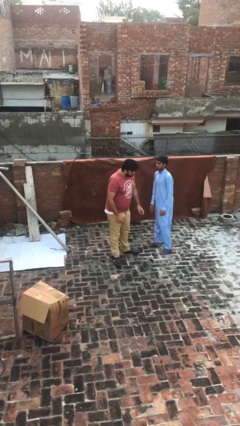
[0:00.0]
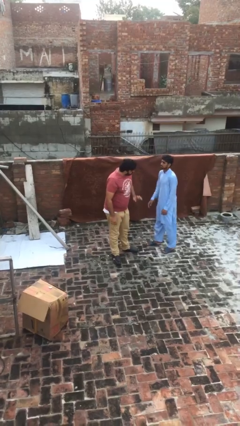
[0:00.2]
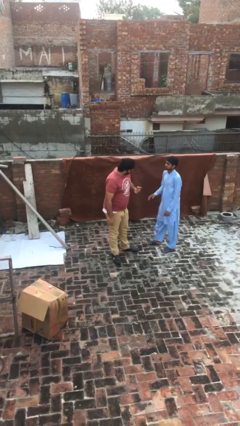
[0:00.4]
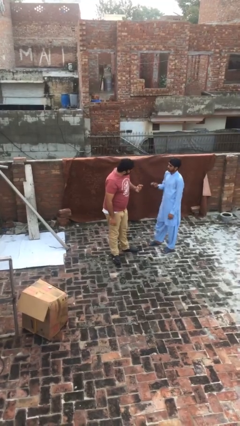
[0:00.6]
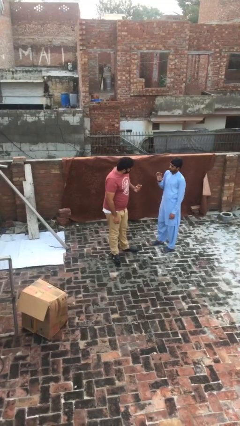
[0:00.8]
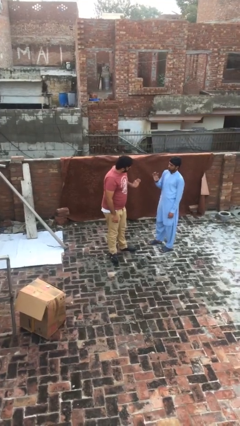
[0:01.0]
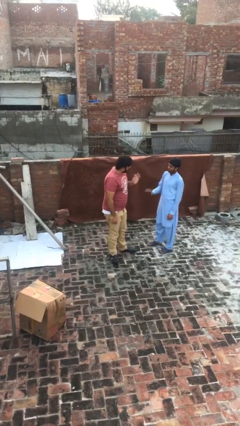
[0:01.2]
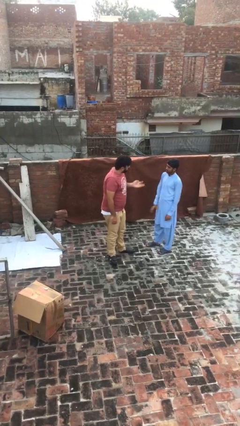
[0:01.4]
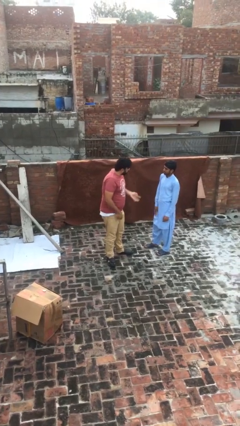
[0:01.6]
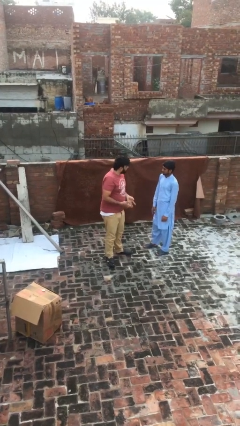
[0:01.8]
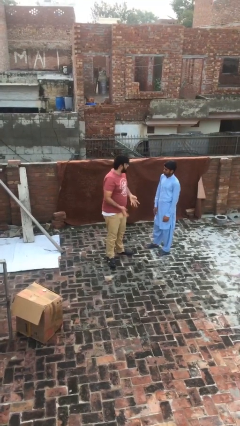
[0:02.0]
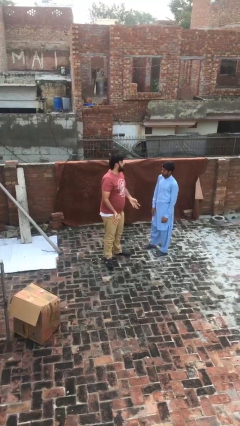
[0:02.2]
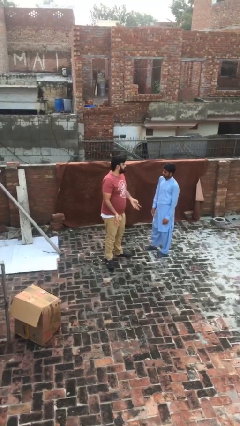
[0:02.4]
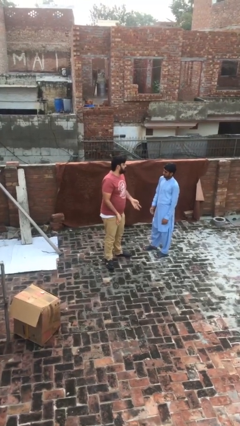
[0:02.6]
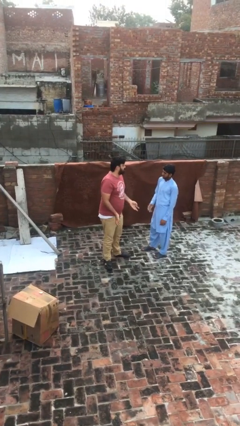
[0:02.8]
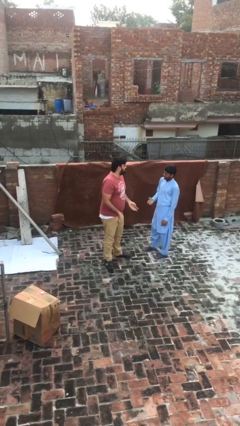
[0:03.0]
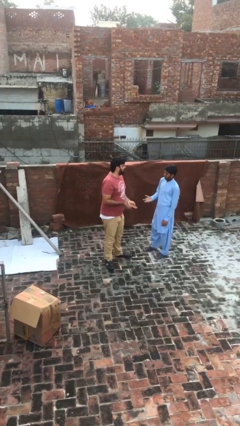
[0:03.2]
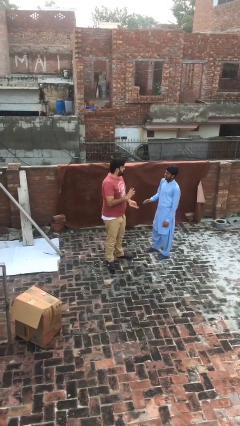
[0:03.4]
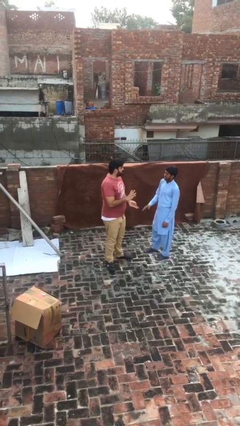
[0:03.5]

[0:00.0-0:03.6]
person talks to person

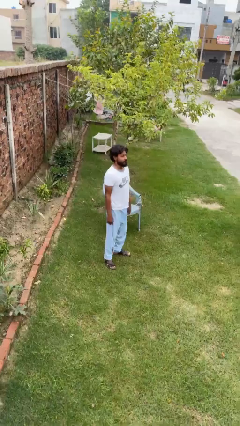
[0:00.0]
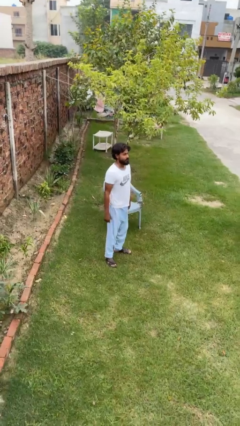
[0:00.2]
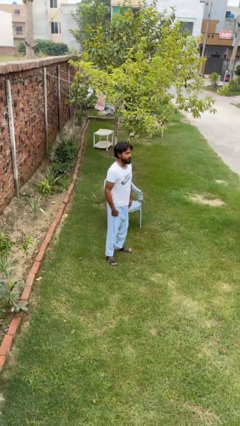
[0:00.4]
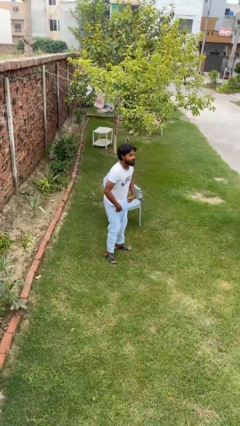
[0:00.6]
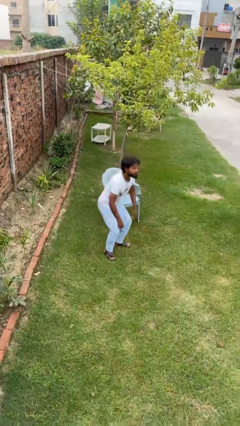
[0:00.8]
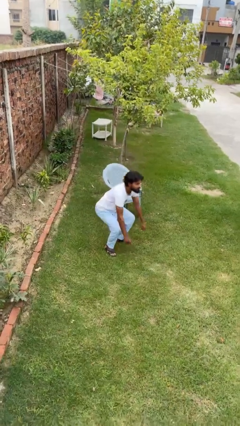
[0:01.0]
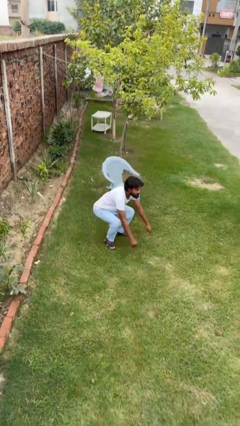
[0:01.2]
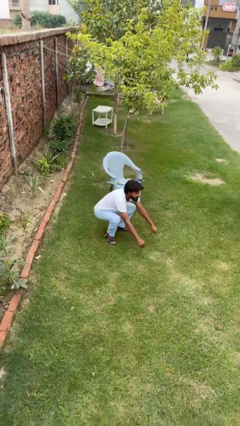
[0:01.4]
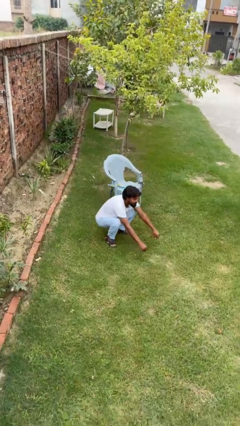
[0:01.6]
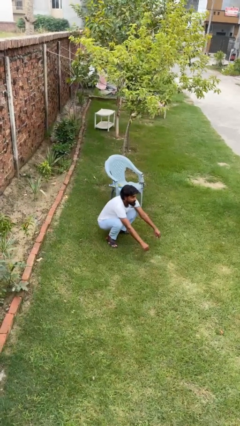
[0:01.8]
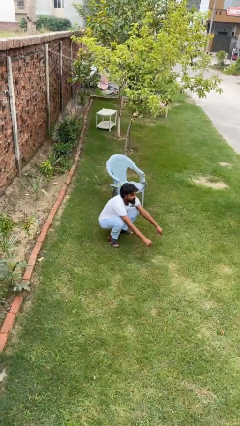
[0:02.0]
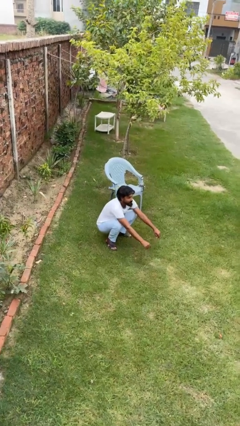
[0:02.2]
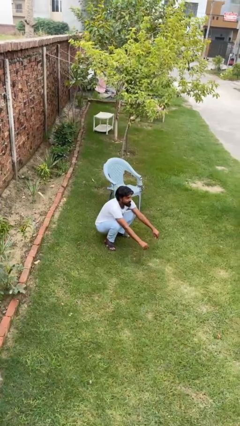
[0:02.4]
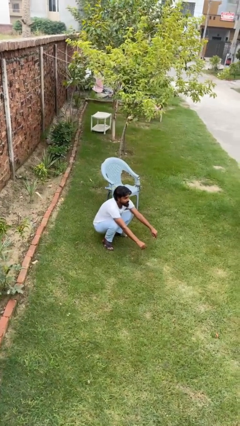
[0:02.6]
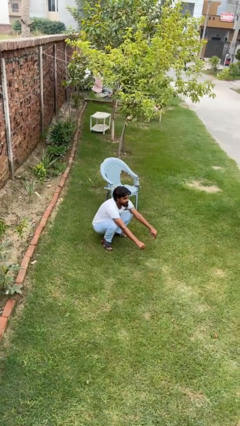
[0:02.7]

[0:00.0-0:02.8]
person squats

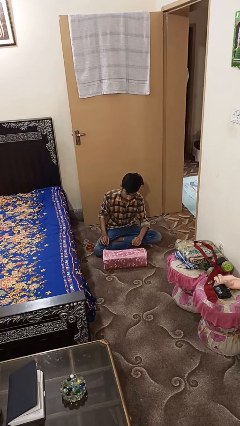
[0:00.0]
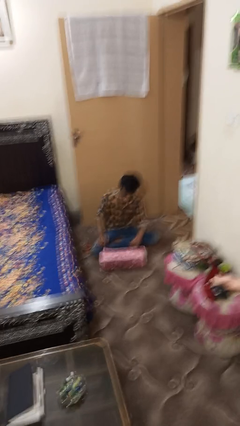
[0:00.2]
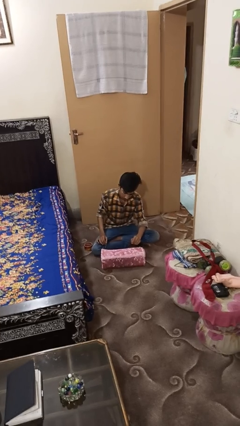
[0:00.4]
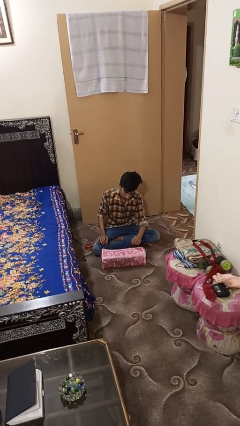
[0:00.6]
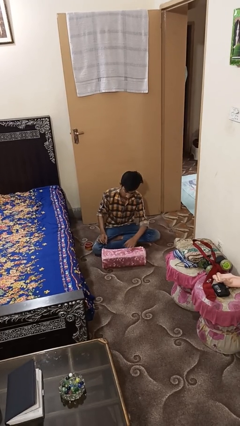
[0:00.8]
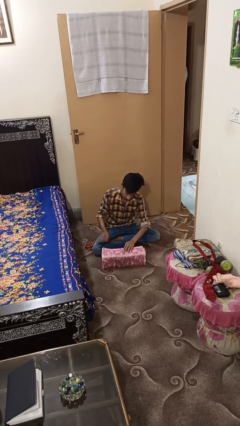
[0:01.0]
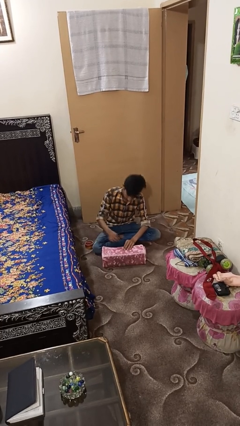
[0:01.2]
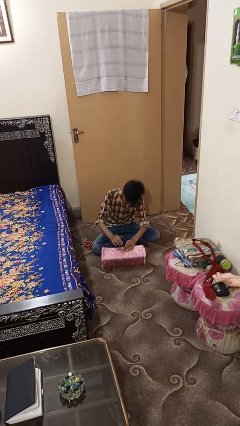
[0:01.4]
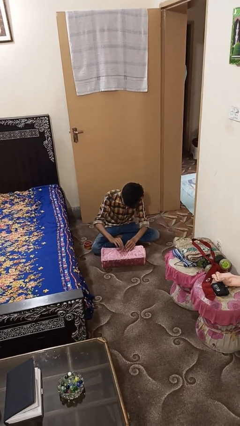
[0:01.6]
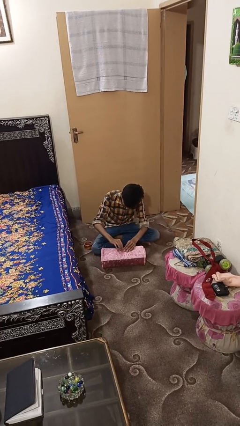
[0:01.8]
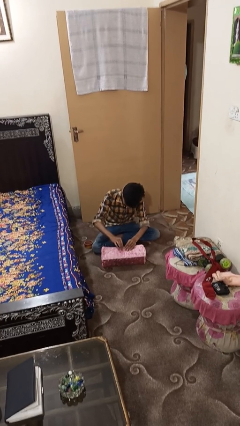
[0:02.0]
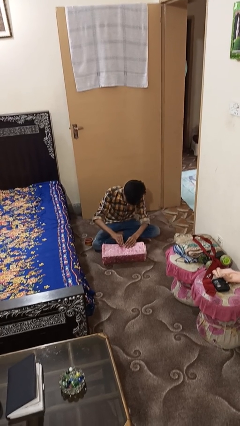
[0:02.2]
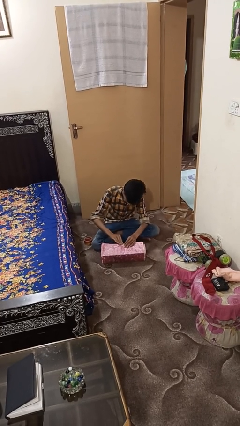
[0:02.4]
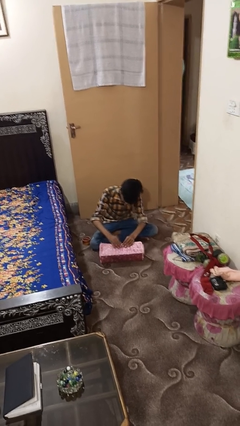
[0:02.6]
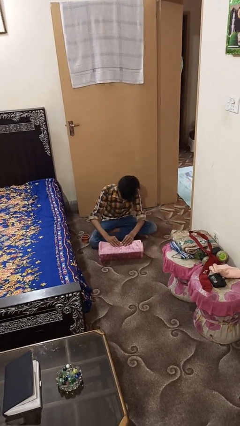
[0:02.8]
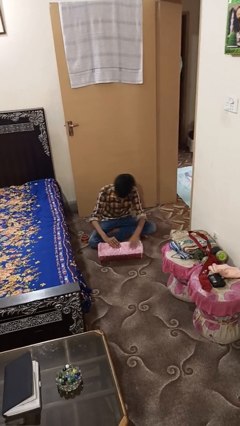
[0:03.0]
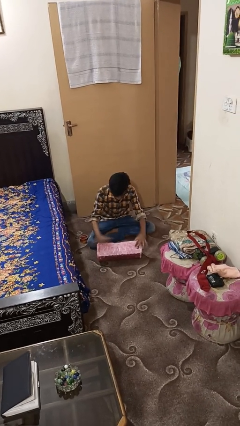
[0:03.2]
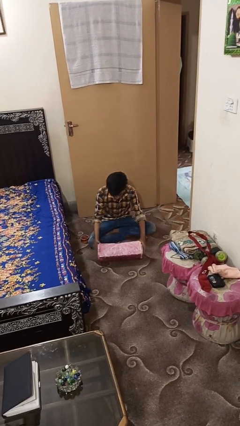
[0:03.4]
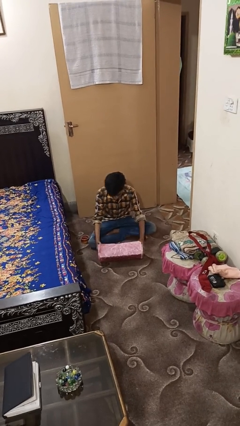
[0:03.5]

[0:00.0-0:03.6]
person wraps box

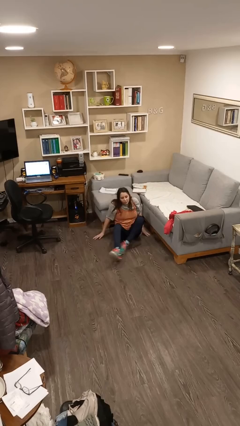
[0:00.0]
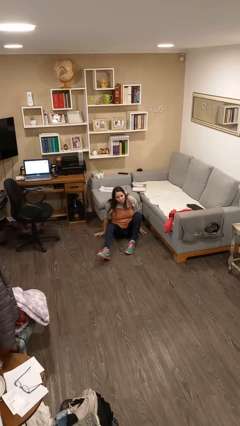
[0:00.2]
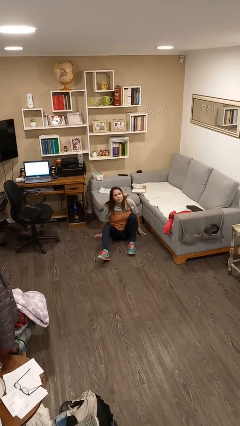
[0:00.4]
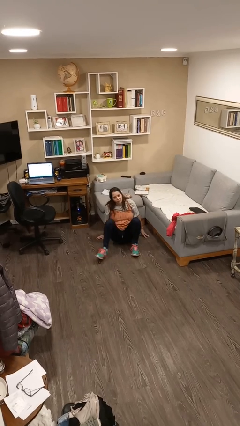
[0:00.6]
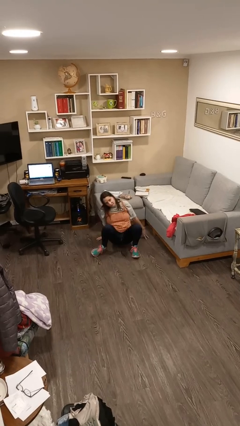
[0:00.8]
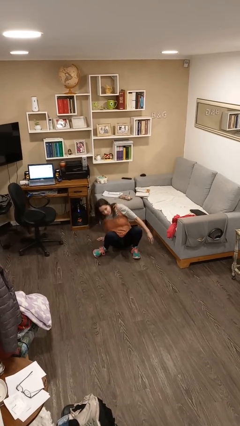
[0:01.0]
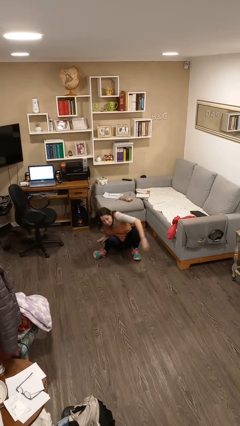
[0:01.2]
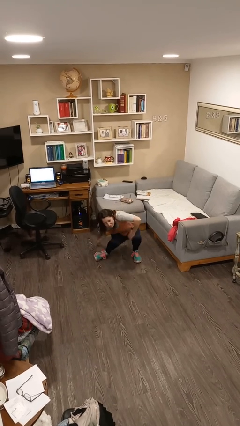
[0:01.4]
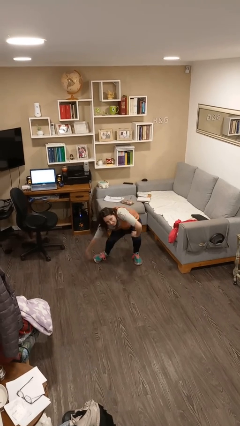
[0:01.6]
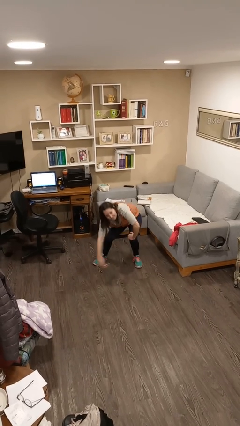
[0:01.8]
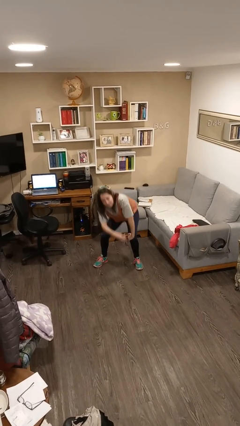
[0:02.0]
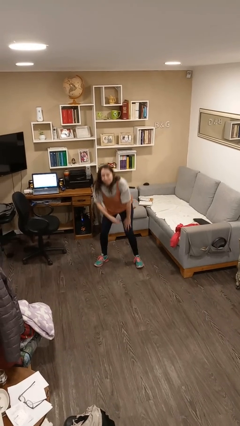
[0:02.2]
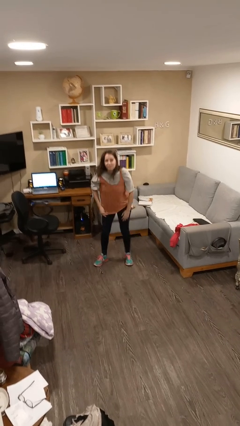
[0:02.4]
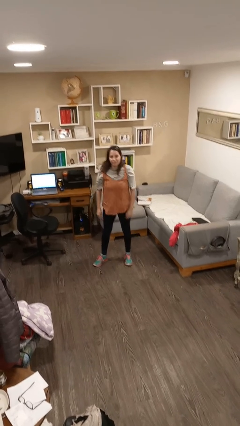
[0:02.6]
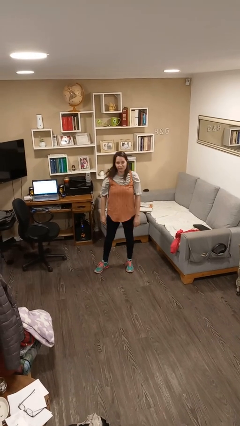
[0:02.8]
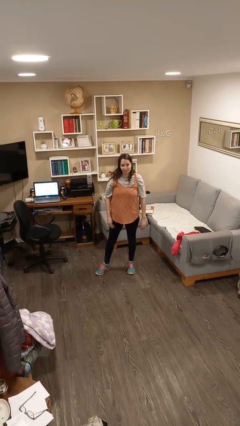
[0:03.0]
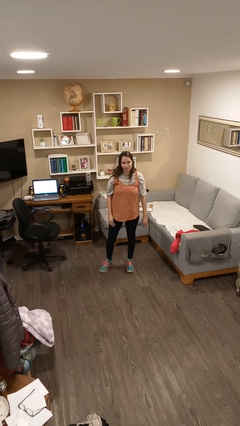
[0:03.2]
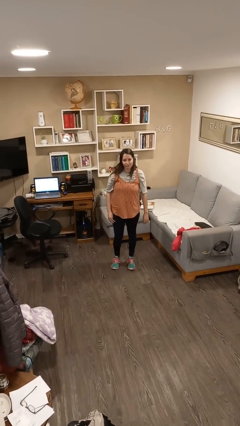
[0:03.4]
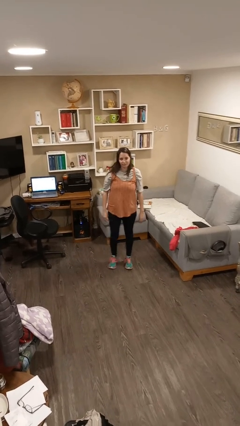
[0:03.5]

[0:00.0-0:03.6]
person stands up from floor

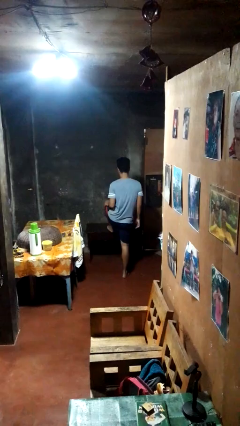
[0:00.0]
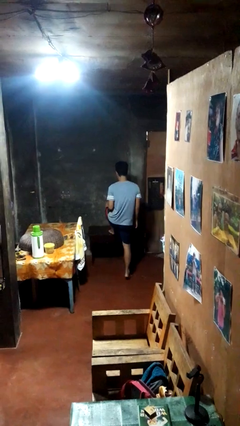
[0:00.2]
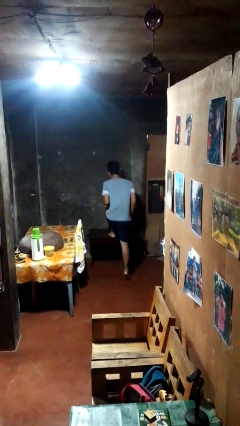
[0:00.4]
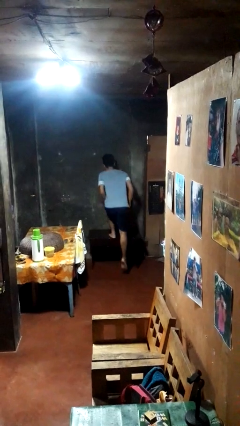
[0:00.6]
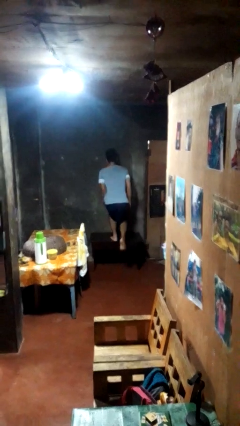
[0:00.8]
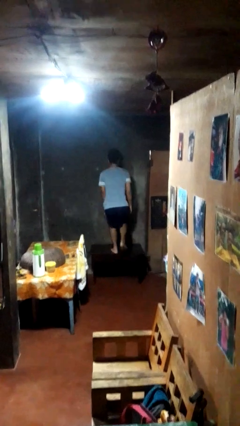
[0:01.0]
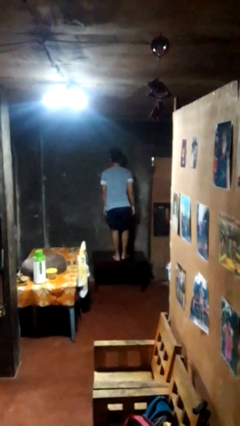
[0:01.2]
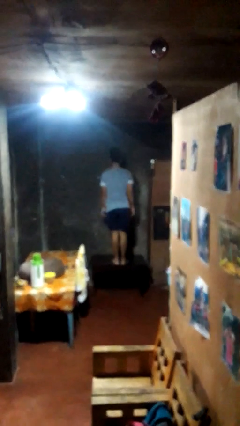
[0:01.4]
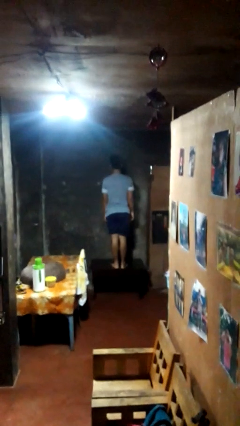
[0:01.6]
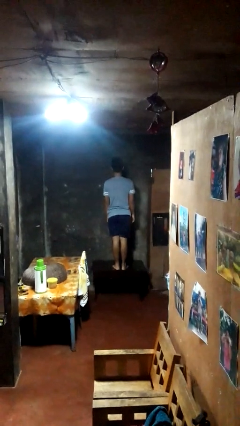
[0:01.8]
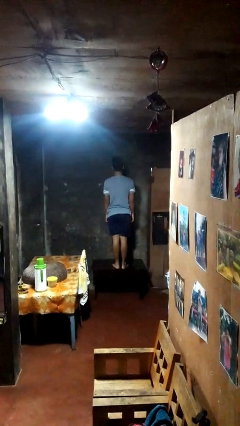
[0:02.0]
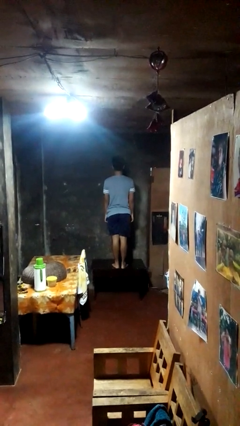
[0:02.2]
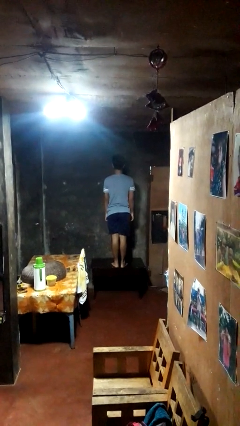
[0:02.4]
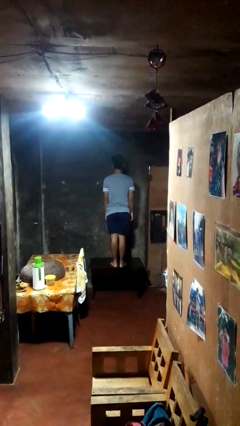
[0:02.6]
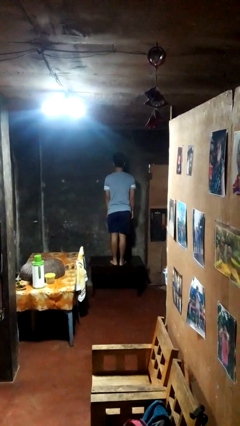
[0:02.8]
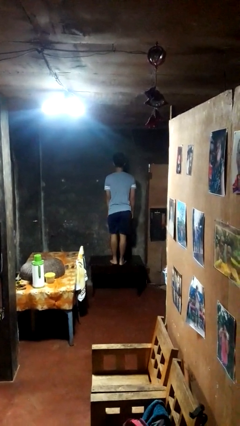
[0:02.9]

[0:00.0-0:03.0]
person climbs on table

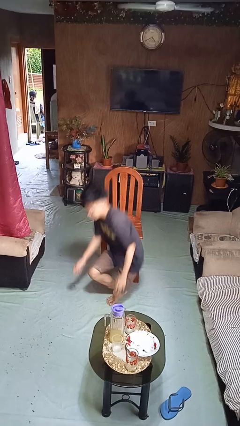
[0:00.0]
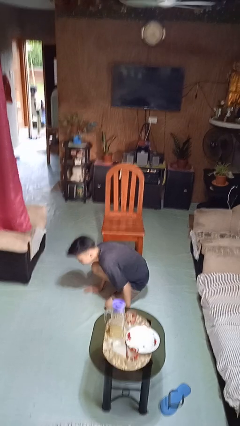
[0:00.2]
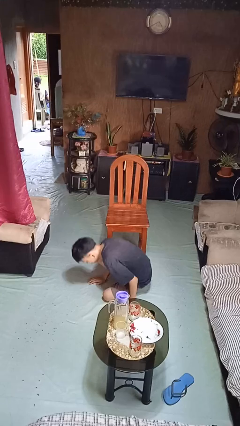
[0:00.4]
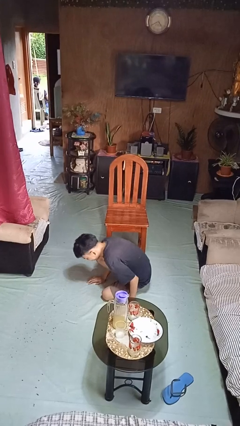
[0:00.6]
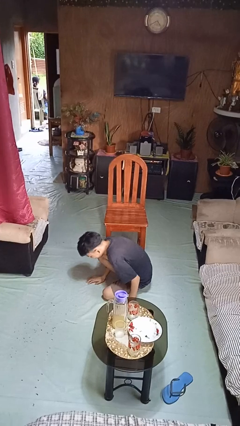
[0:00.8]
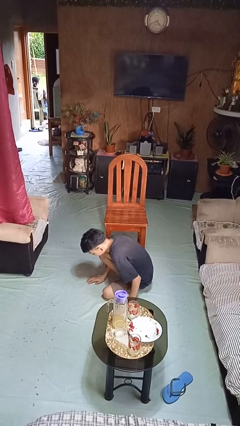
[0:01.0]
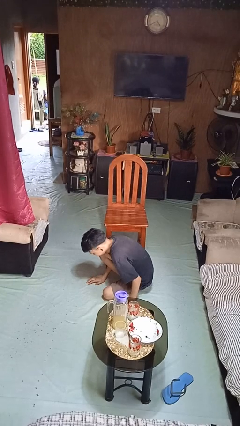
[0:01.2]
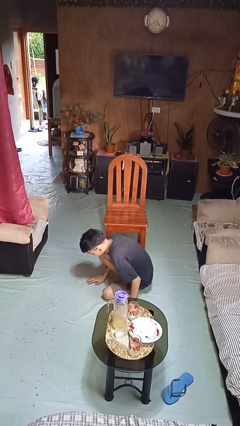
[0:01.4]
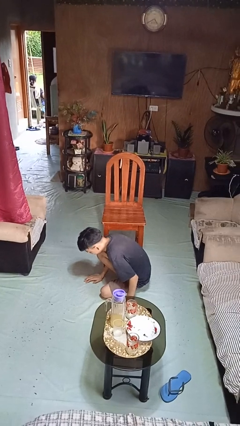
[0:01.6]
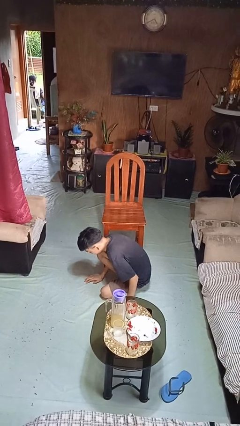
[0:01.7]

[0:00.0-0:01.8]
person falls from chair
